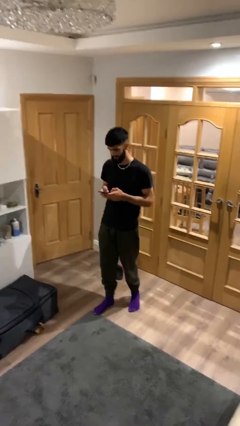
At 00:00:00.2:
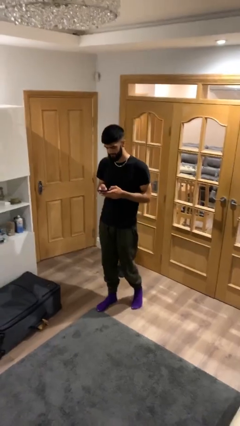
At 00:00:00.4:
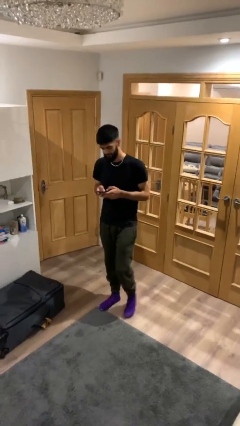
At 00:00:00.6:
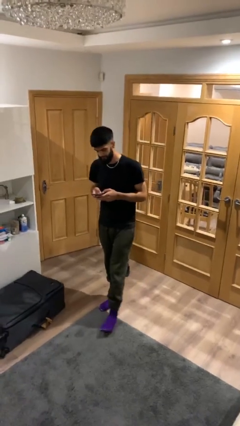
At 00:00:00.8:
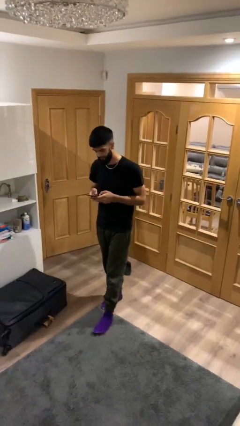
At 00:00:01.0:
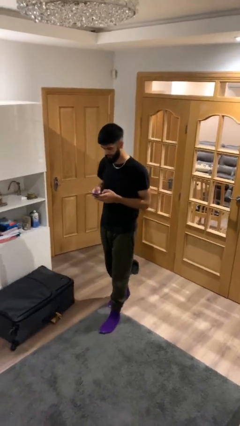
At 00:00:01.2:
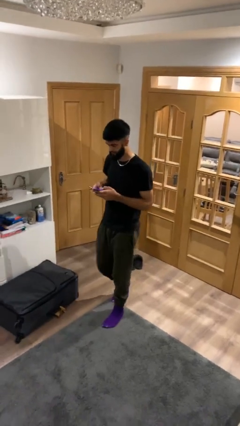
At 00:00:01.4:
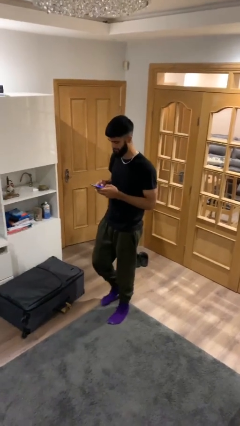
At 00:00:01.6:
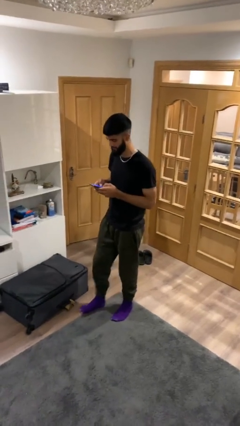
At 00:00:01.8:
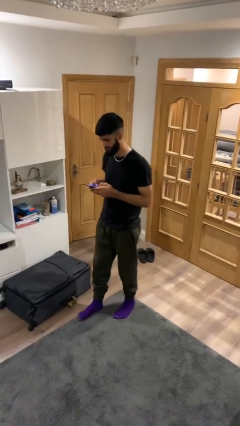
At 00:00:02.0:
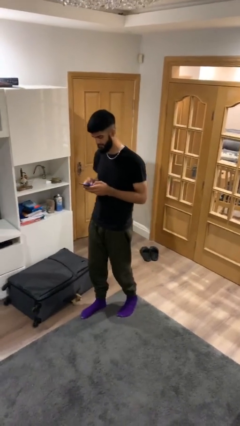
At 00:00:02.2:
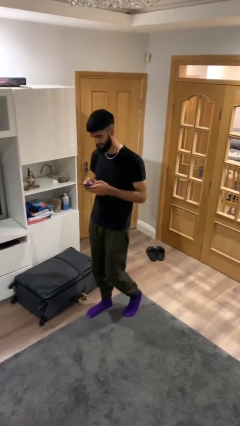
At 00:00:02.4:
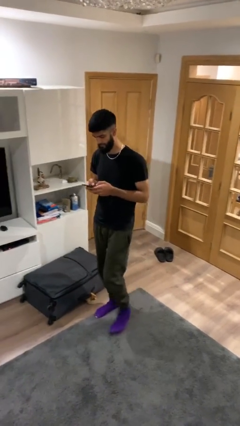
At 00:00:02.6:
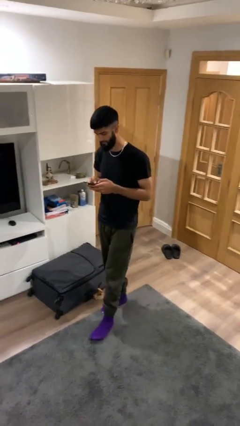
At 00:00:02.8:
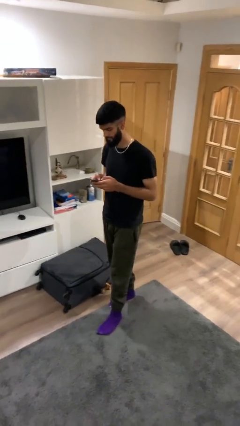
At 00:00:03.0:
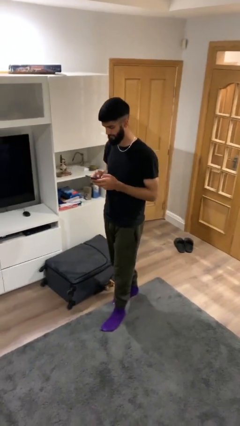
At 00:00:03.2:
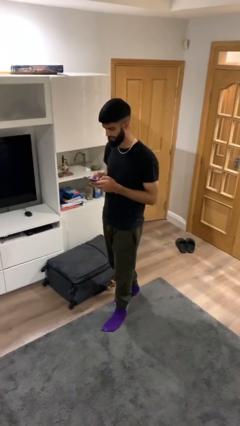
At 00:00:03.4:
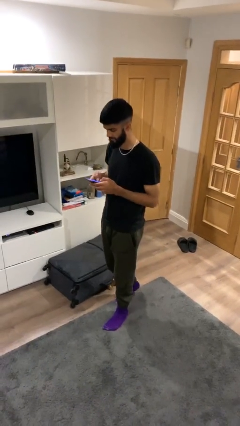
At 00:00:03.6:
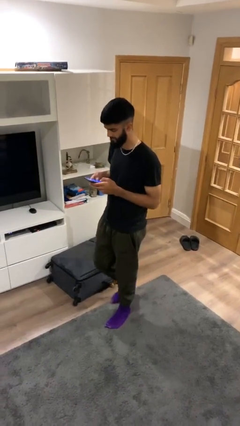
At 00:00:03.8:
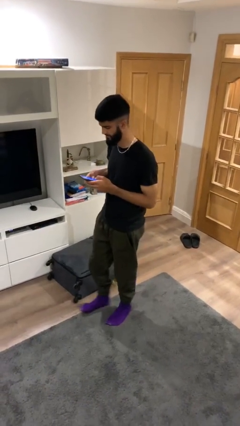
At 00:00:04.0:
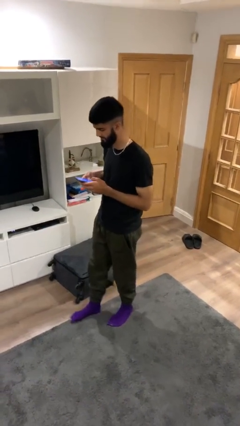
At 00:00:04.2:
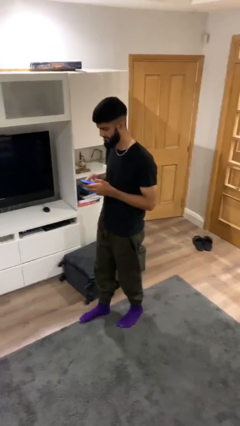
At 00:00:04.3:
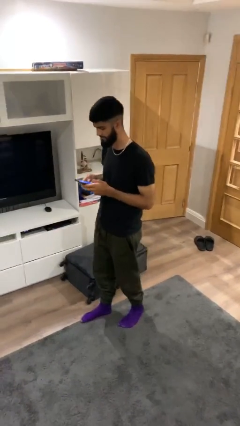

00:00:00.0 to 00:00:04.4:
person texts on phone

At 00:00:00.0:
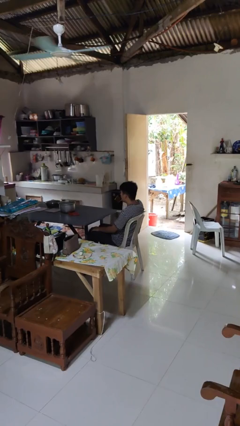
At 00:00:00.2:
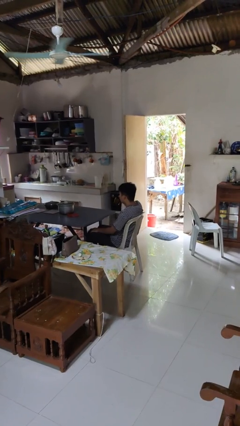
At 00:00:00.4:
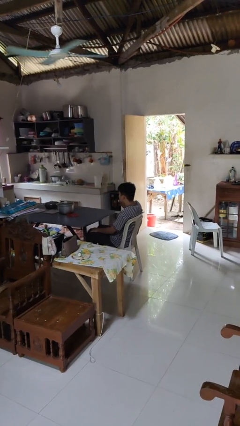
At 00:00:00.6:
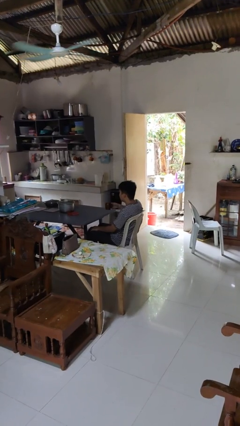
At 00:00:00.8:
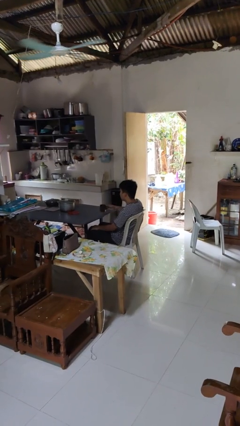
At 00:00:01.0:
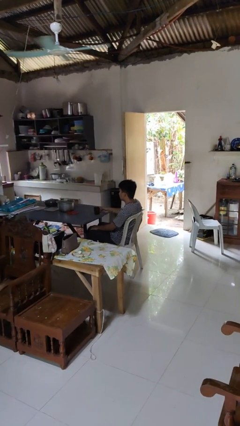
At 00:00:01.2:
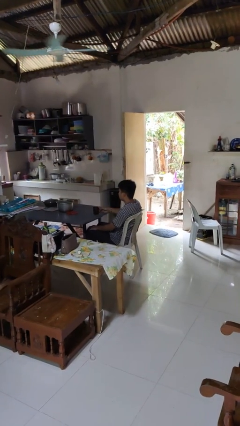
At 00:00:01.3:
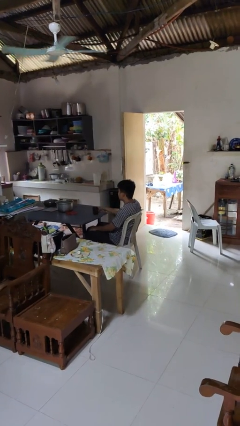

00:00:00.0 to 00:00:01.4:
person puts down object on table

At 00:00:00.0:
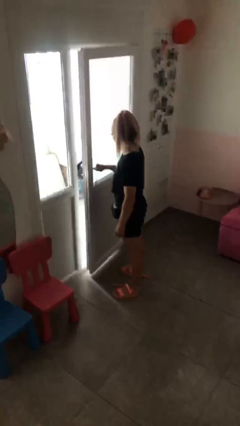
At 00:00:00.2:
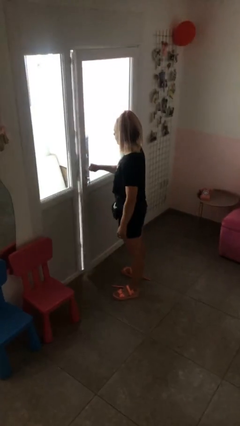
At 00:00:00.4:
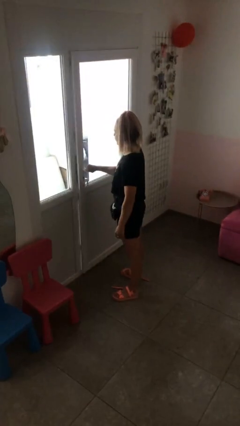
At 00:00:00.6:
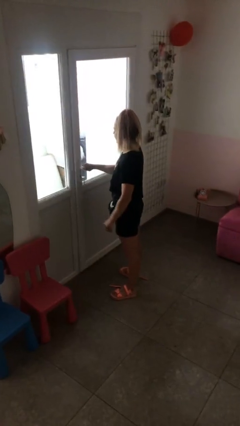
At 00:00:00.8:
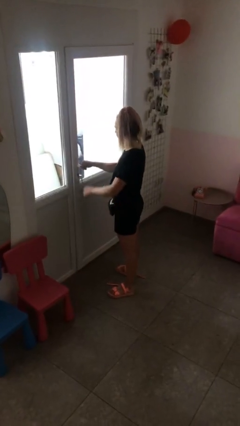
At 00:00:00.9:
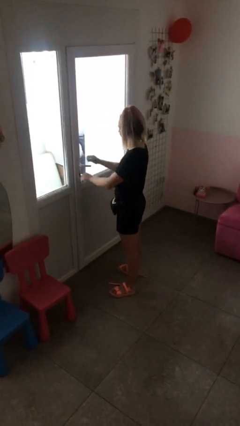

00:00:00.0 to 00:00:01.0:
person closes facility door

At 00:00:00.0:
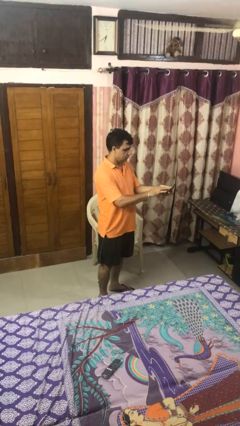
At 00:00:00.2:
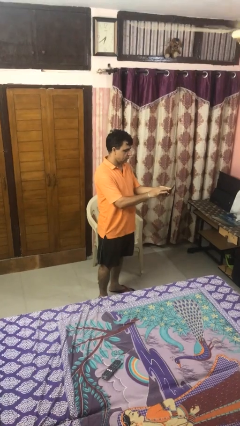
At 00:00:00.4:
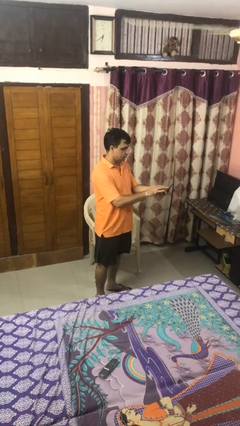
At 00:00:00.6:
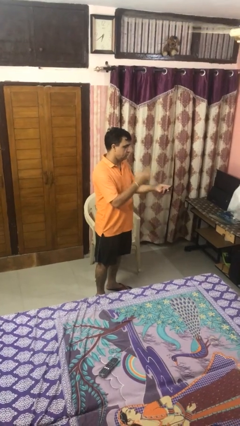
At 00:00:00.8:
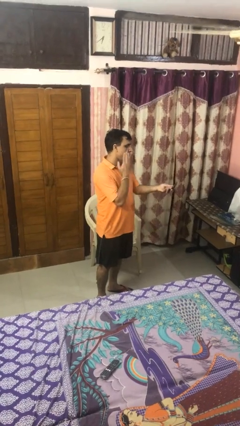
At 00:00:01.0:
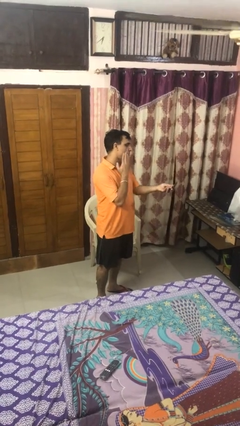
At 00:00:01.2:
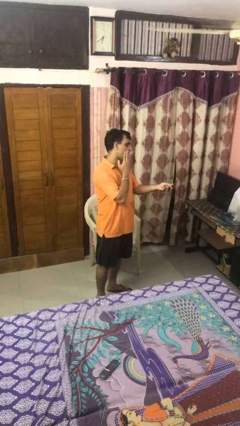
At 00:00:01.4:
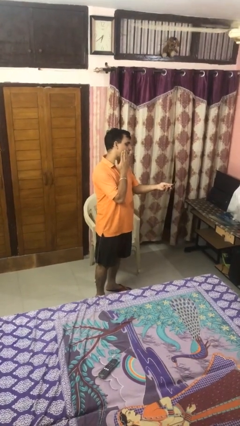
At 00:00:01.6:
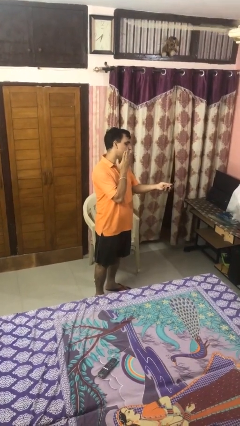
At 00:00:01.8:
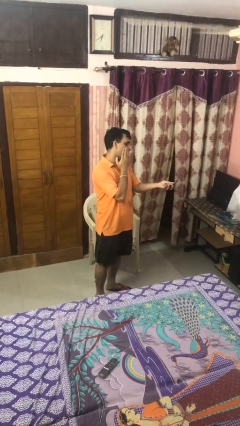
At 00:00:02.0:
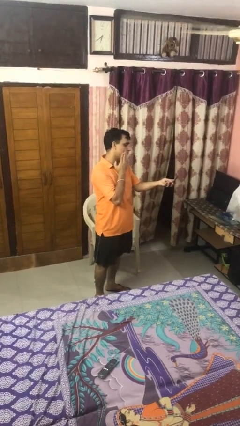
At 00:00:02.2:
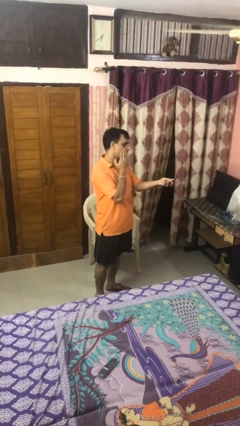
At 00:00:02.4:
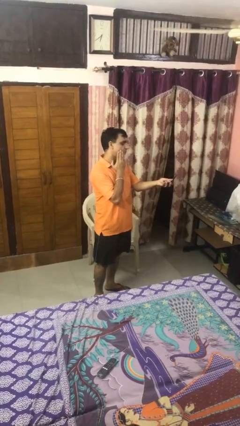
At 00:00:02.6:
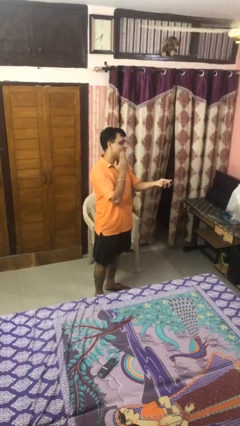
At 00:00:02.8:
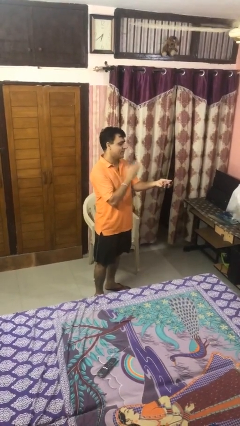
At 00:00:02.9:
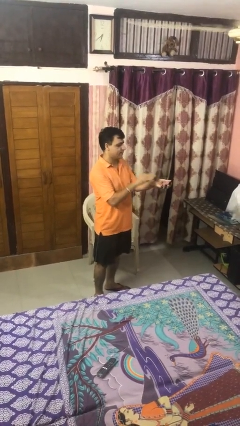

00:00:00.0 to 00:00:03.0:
person applies foundation makeup

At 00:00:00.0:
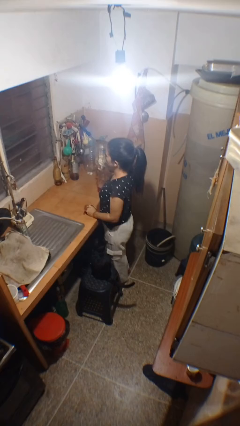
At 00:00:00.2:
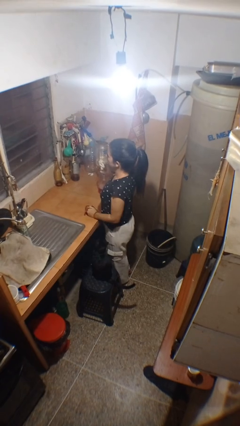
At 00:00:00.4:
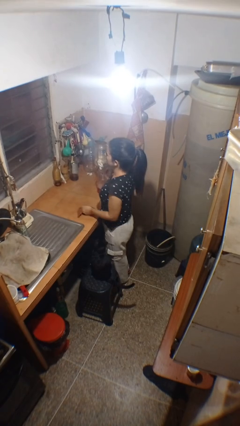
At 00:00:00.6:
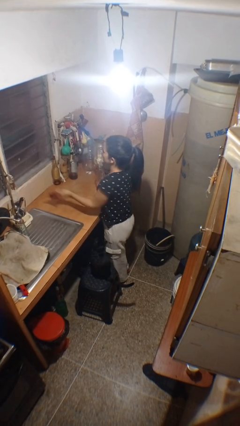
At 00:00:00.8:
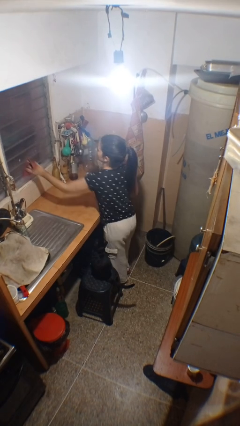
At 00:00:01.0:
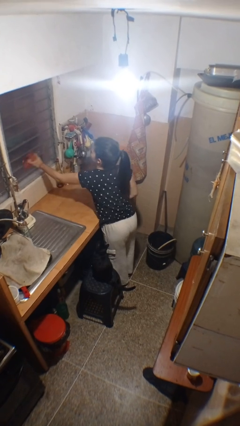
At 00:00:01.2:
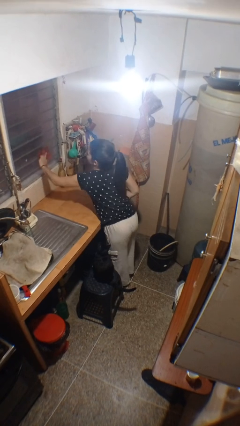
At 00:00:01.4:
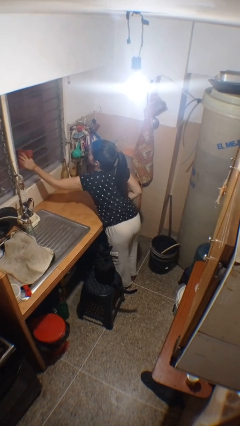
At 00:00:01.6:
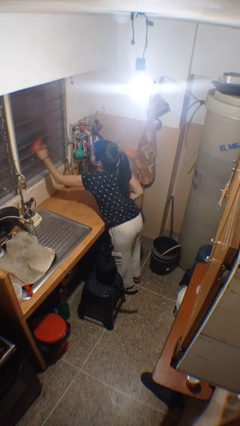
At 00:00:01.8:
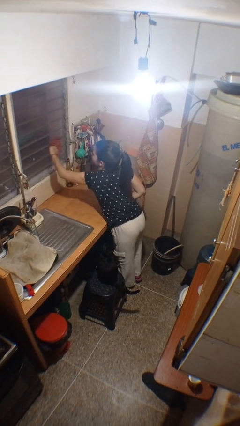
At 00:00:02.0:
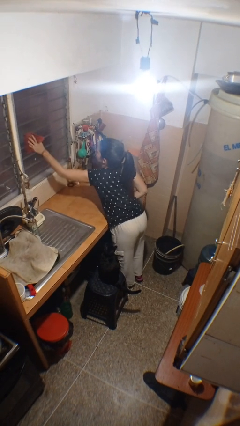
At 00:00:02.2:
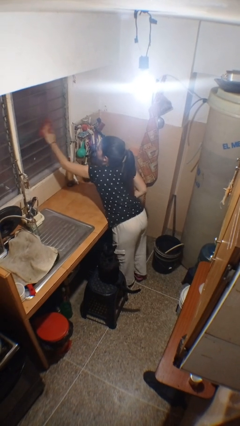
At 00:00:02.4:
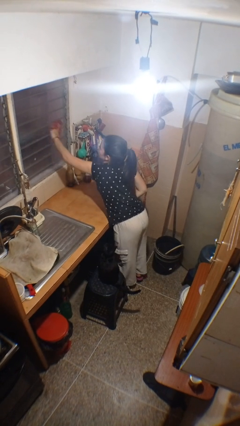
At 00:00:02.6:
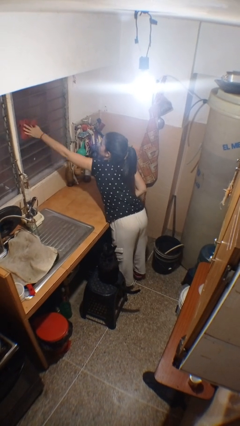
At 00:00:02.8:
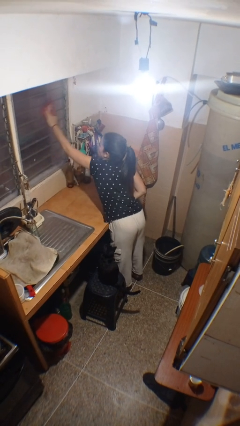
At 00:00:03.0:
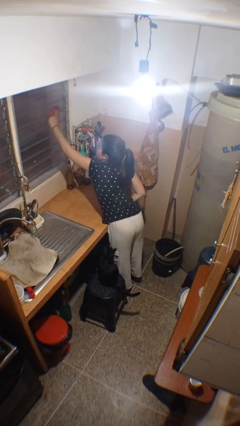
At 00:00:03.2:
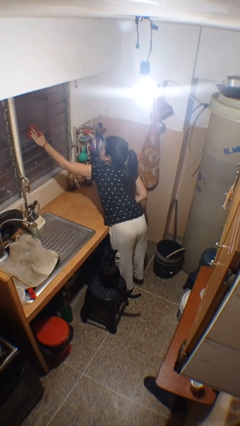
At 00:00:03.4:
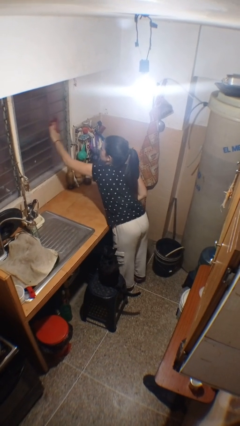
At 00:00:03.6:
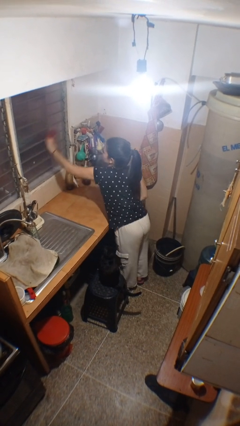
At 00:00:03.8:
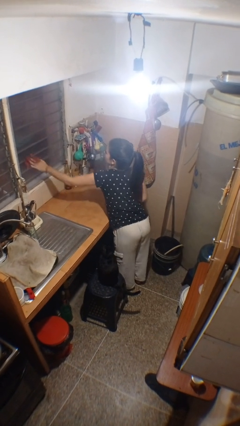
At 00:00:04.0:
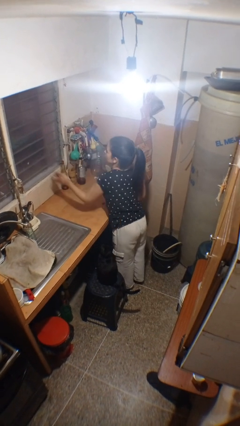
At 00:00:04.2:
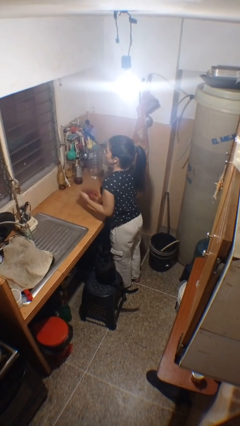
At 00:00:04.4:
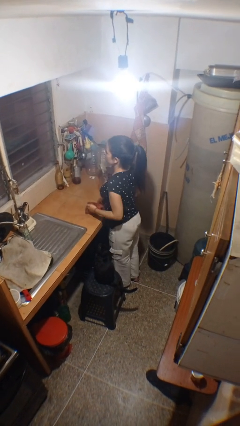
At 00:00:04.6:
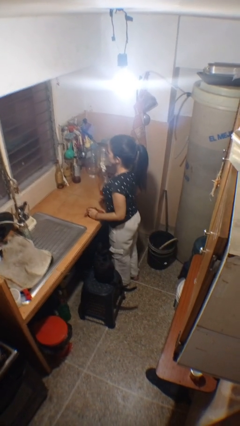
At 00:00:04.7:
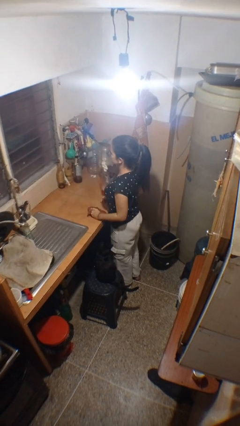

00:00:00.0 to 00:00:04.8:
person washes window

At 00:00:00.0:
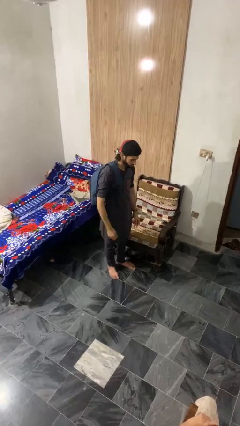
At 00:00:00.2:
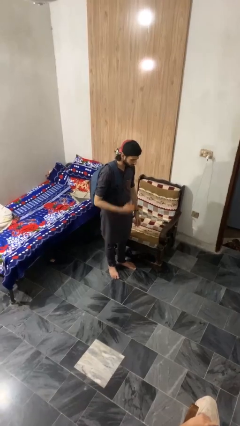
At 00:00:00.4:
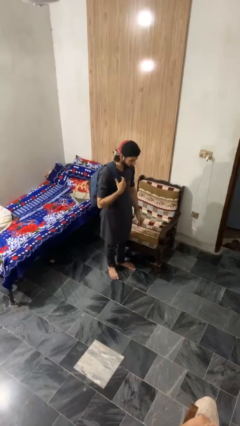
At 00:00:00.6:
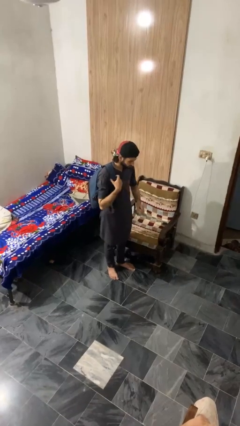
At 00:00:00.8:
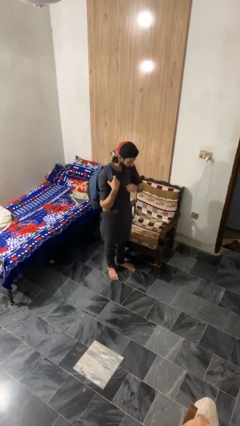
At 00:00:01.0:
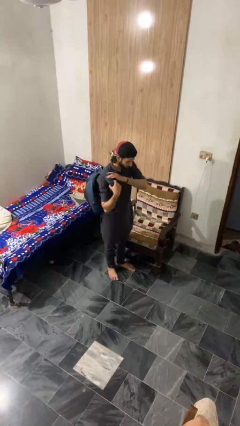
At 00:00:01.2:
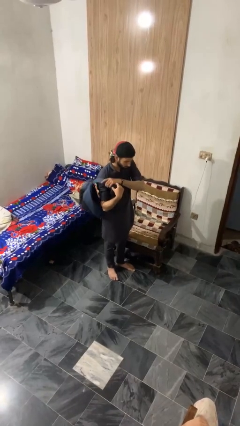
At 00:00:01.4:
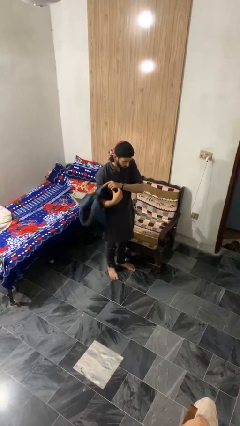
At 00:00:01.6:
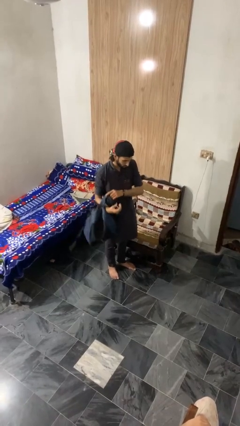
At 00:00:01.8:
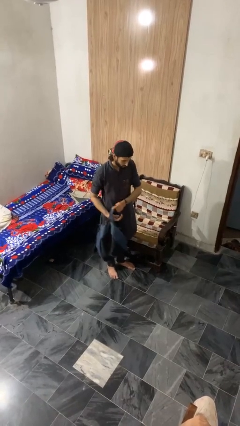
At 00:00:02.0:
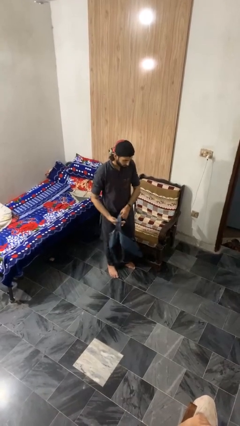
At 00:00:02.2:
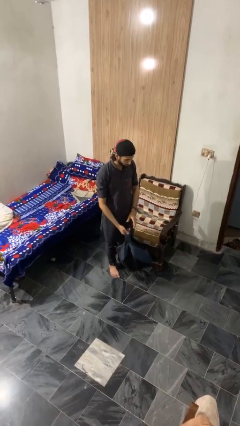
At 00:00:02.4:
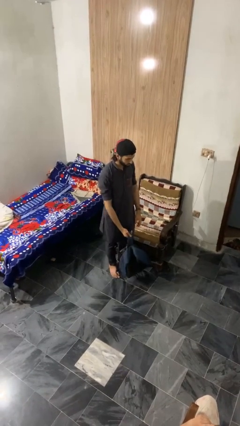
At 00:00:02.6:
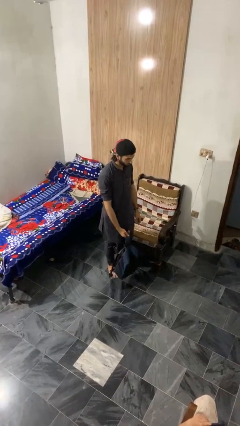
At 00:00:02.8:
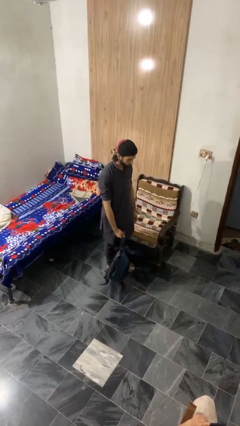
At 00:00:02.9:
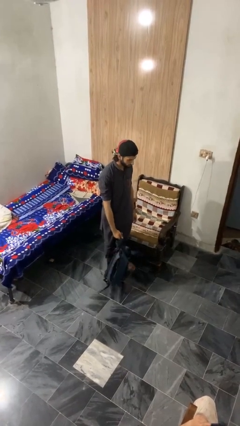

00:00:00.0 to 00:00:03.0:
person takes off backpack
